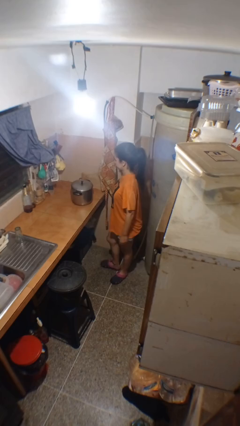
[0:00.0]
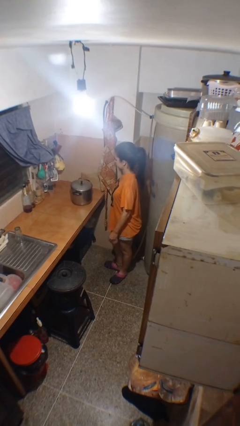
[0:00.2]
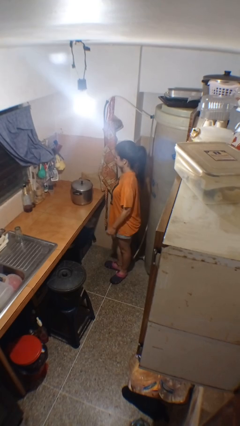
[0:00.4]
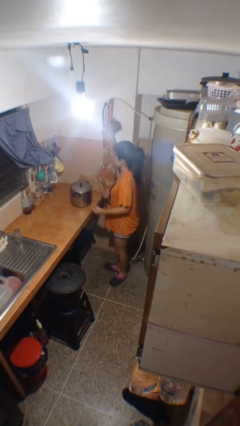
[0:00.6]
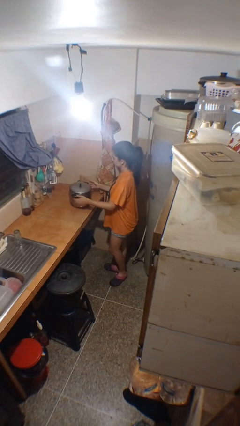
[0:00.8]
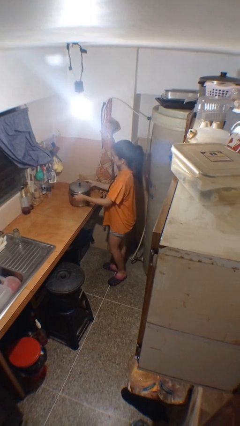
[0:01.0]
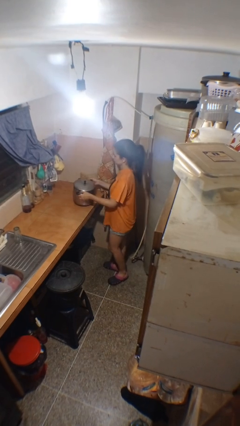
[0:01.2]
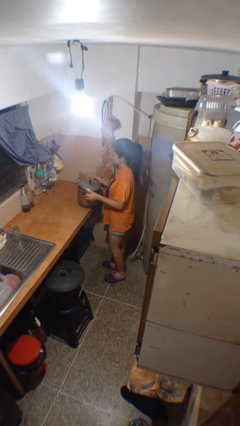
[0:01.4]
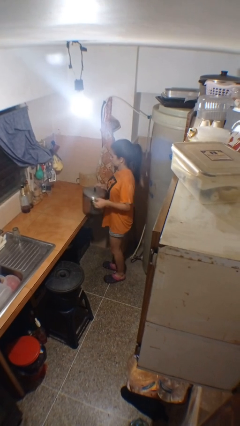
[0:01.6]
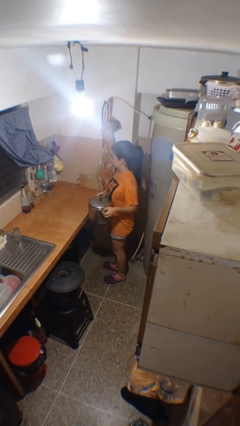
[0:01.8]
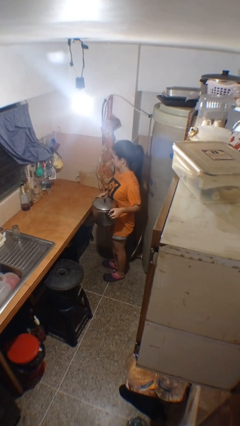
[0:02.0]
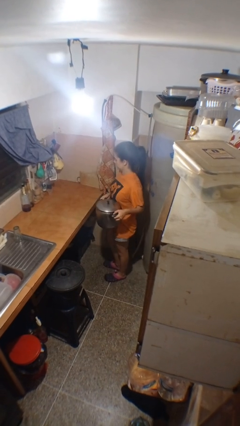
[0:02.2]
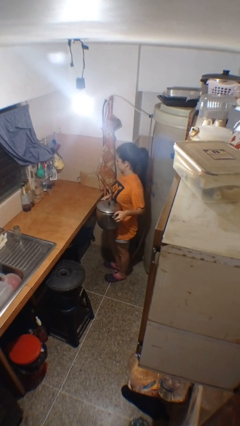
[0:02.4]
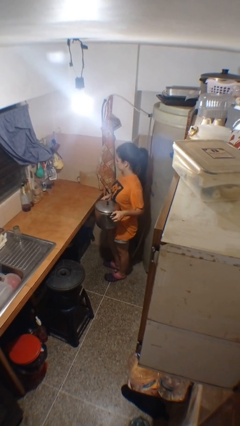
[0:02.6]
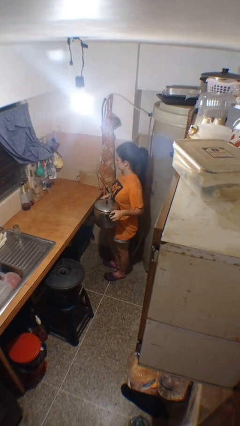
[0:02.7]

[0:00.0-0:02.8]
person picks up object from countertop

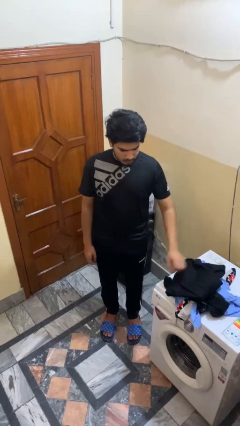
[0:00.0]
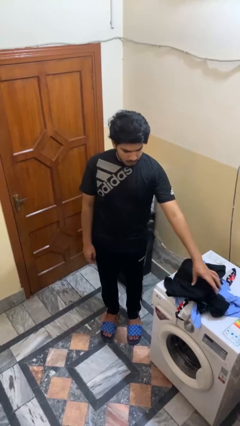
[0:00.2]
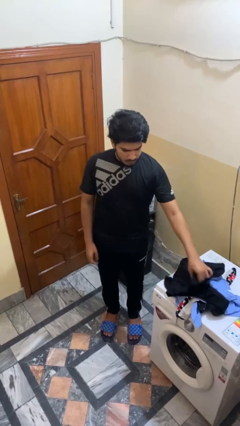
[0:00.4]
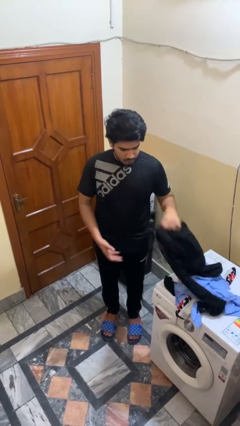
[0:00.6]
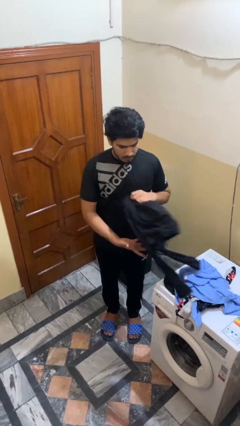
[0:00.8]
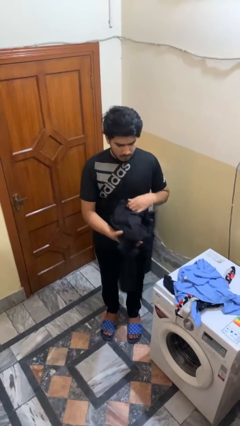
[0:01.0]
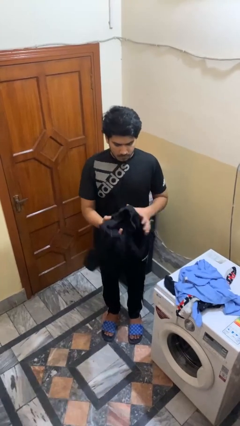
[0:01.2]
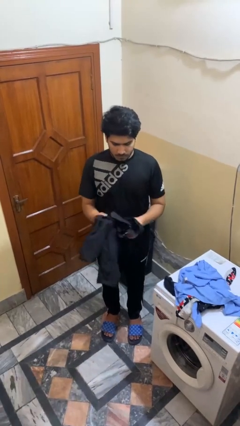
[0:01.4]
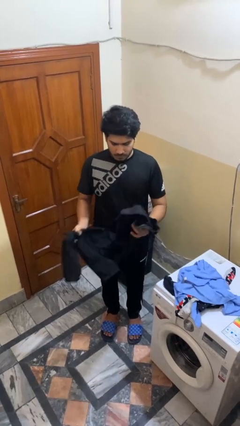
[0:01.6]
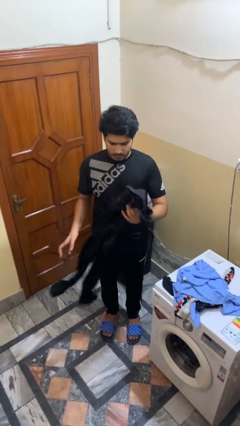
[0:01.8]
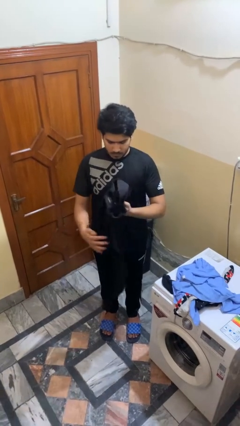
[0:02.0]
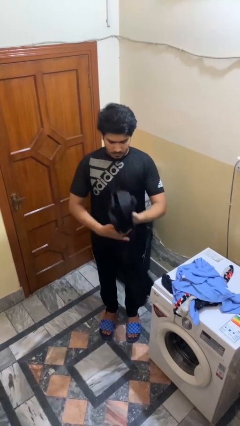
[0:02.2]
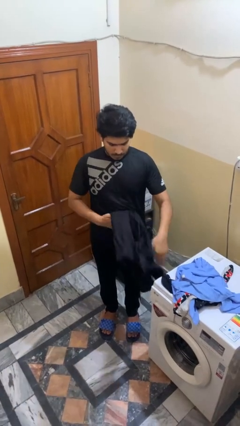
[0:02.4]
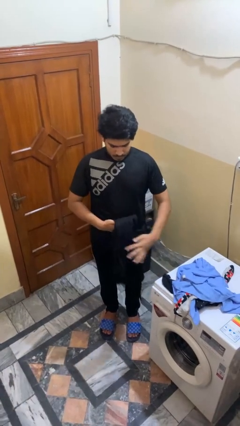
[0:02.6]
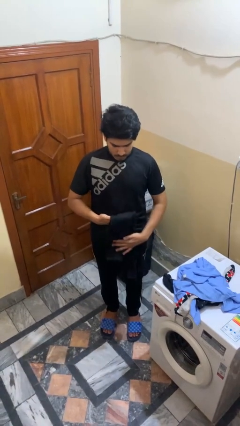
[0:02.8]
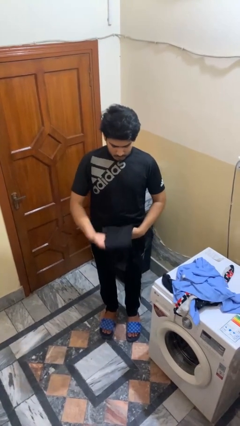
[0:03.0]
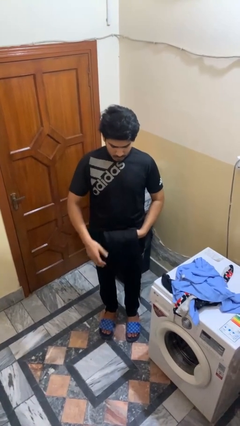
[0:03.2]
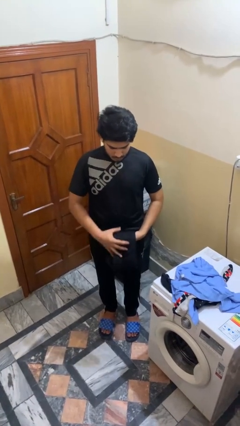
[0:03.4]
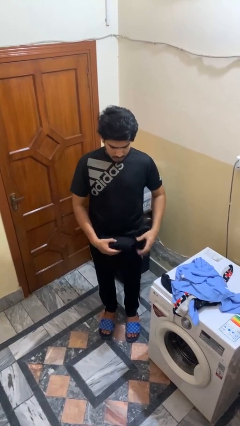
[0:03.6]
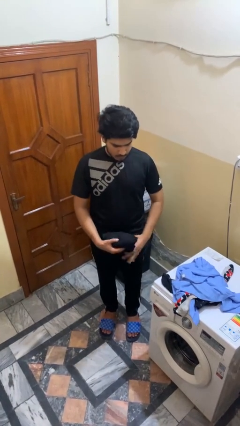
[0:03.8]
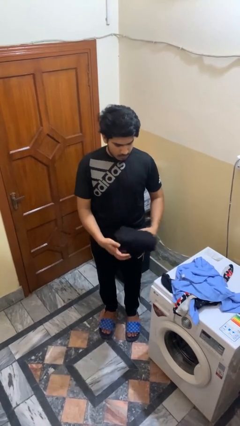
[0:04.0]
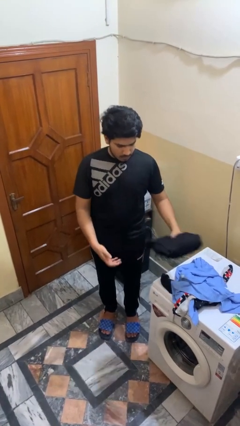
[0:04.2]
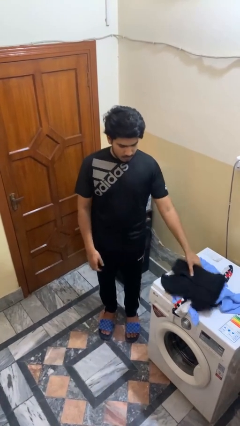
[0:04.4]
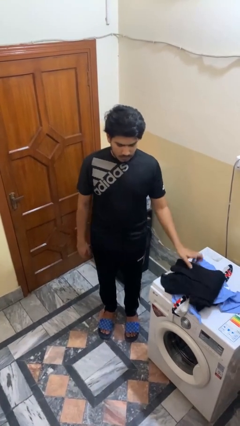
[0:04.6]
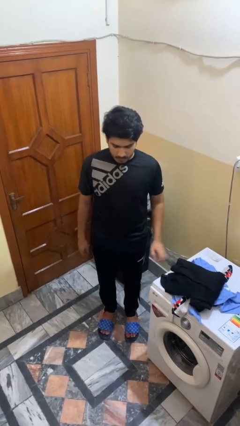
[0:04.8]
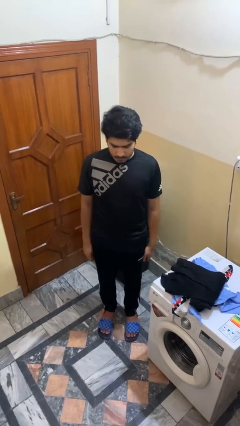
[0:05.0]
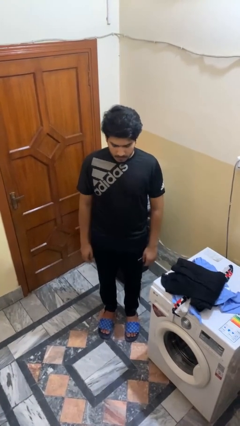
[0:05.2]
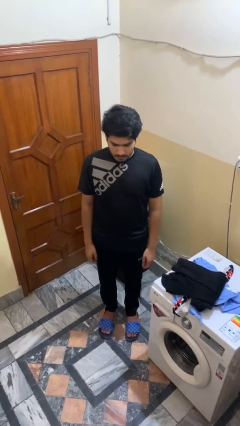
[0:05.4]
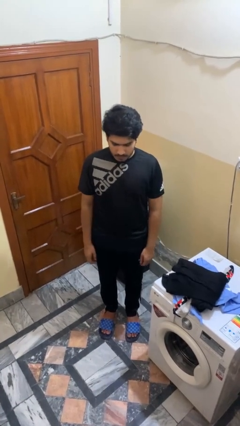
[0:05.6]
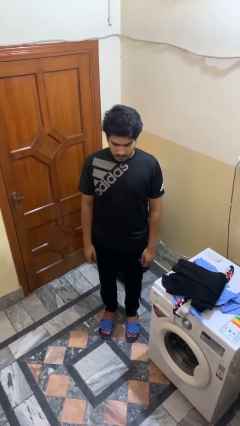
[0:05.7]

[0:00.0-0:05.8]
person folds pants

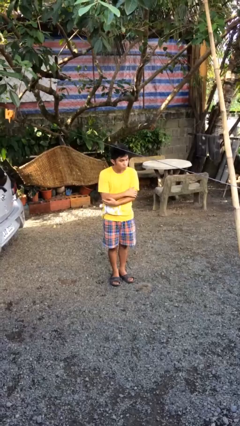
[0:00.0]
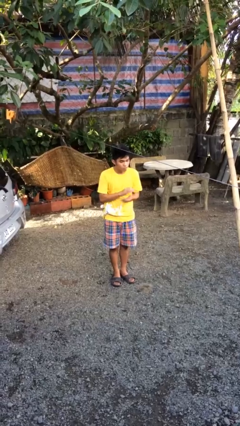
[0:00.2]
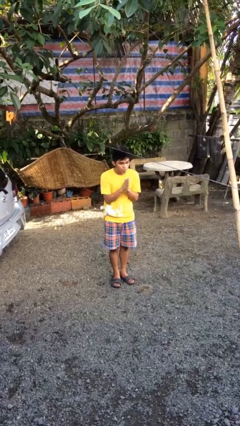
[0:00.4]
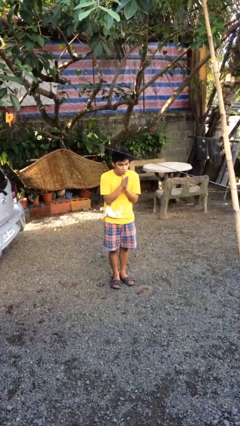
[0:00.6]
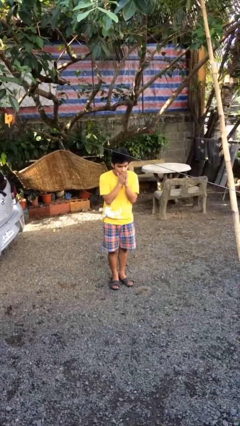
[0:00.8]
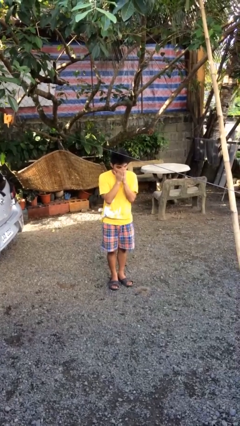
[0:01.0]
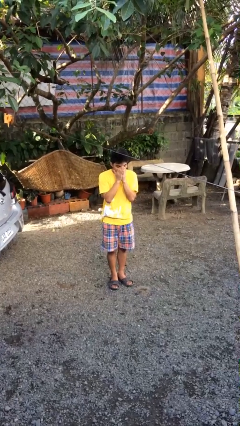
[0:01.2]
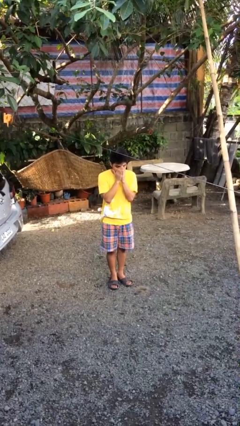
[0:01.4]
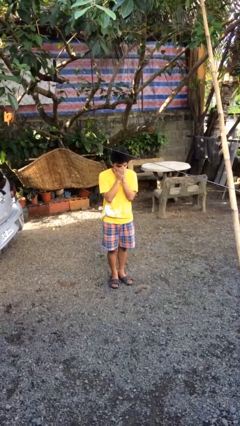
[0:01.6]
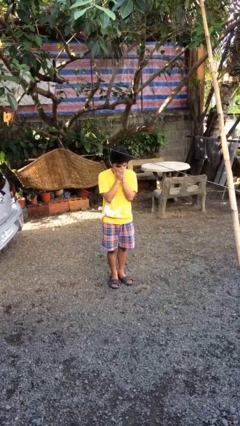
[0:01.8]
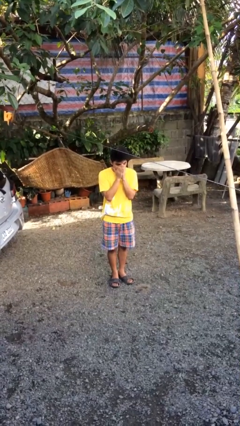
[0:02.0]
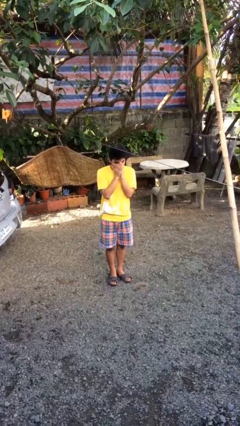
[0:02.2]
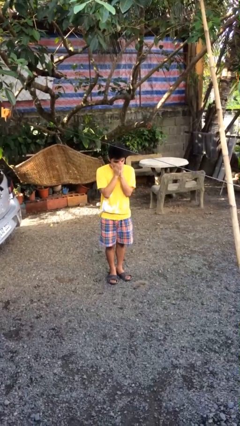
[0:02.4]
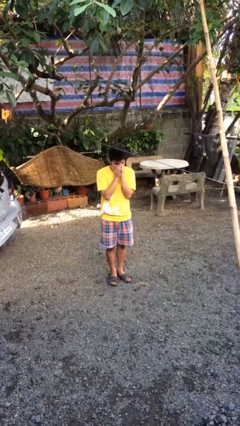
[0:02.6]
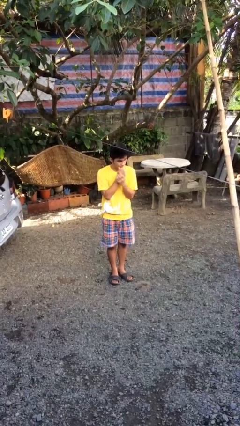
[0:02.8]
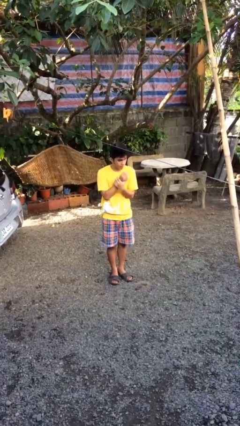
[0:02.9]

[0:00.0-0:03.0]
person blows into hands

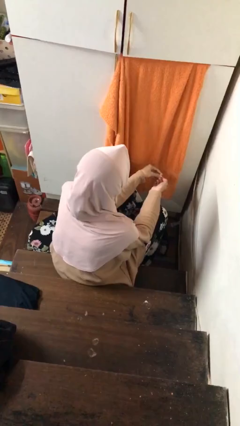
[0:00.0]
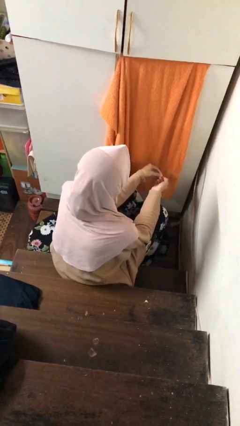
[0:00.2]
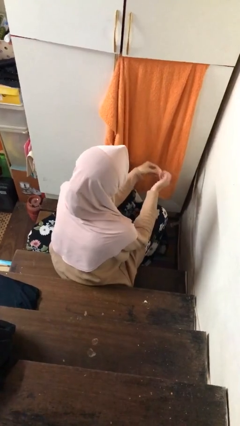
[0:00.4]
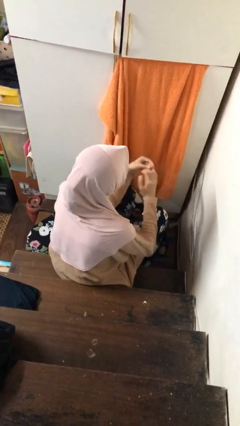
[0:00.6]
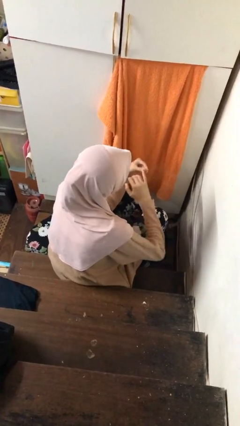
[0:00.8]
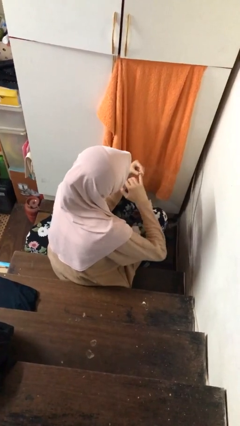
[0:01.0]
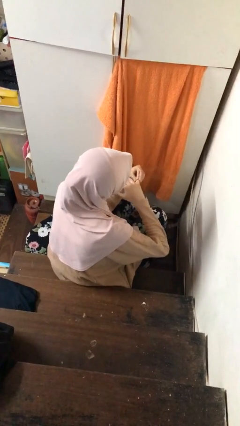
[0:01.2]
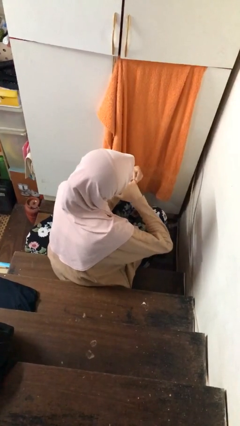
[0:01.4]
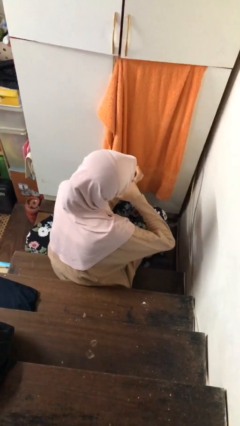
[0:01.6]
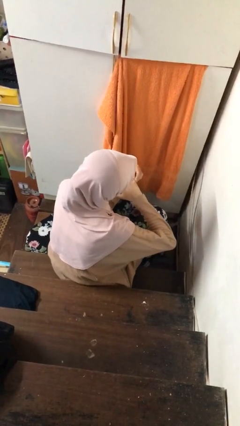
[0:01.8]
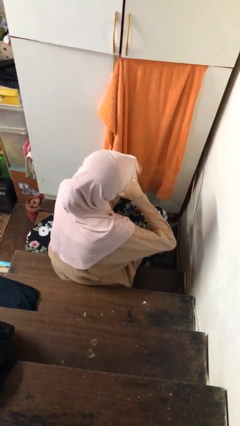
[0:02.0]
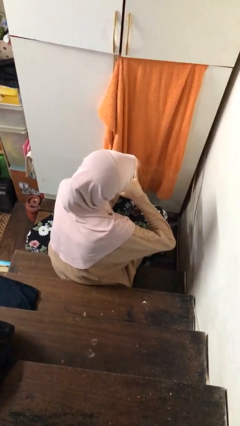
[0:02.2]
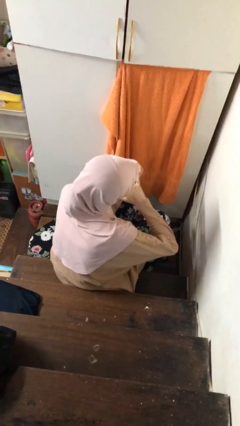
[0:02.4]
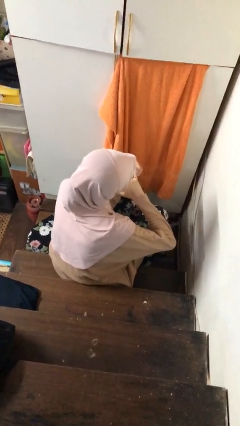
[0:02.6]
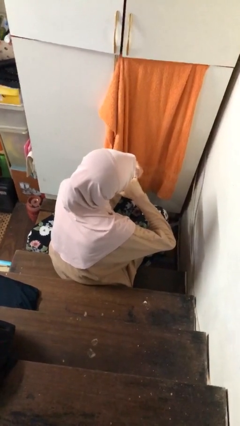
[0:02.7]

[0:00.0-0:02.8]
person puts on ring

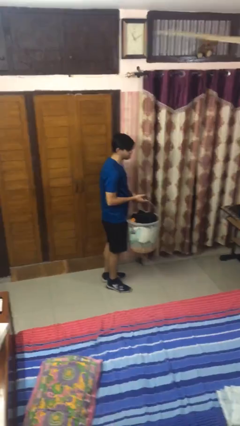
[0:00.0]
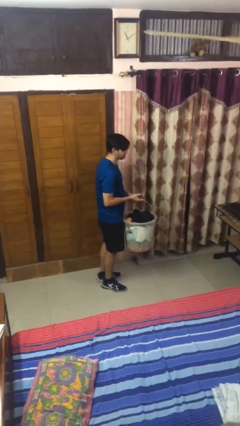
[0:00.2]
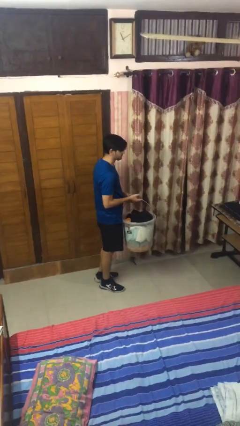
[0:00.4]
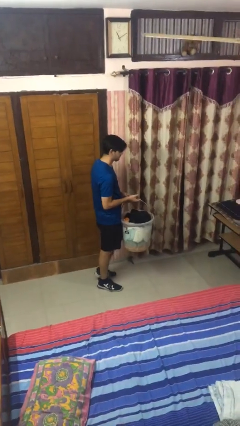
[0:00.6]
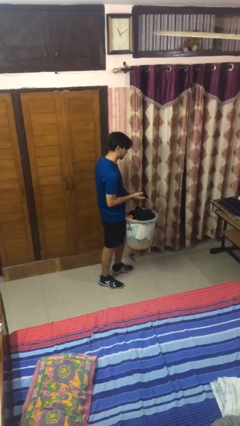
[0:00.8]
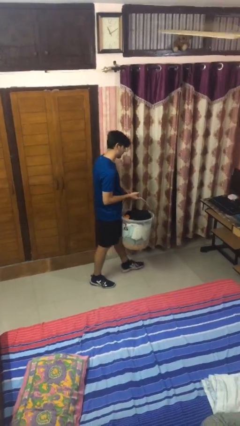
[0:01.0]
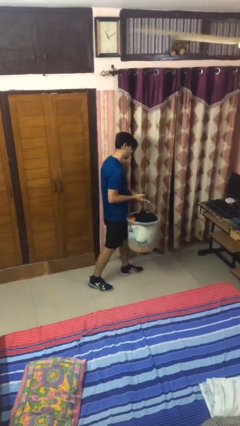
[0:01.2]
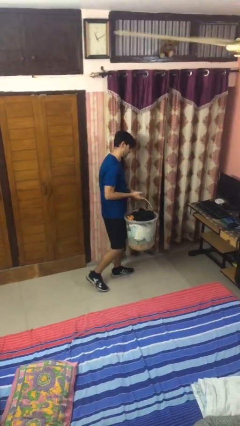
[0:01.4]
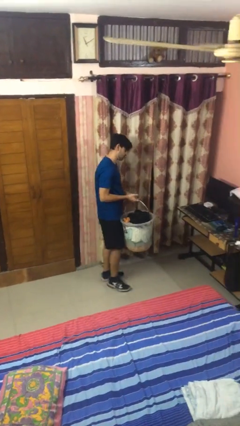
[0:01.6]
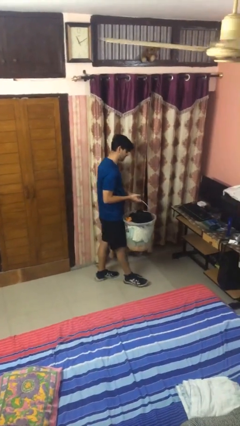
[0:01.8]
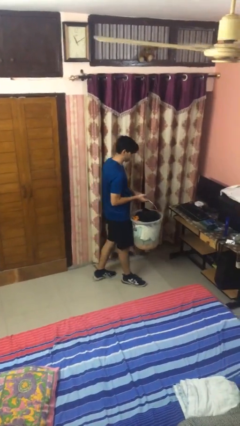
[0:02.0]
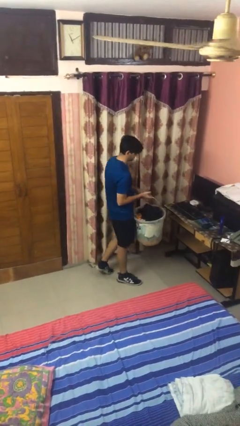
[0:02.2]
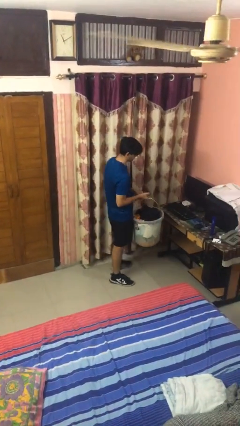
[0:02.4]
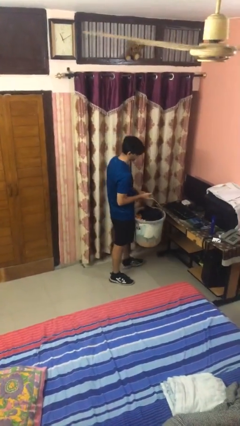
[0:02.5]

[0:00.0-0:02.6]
person carries laundry basket

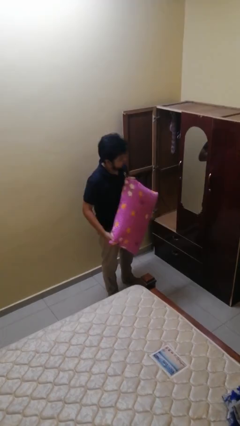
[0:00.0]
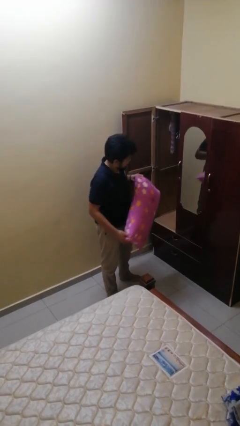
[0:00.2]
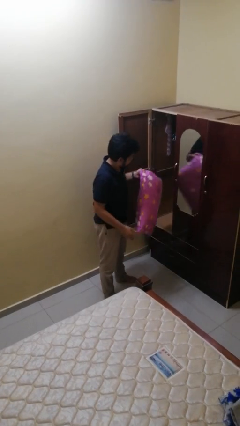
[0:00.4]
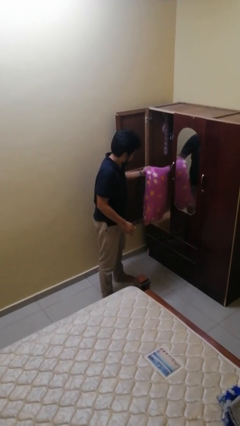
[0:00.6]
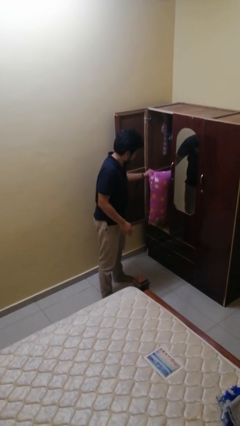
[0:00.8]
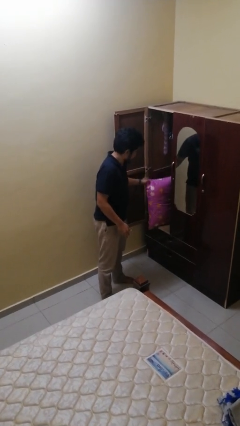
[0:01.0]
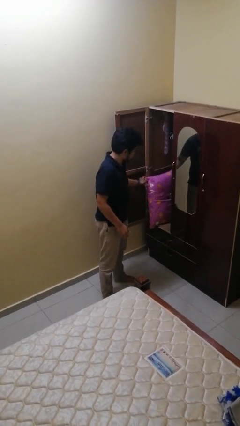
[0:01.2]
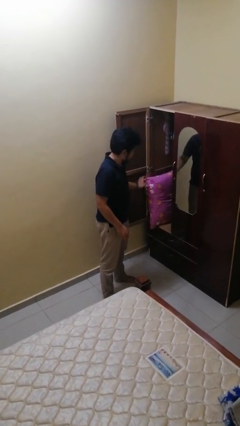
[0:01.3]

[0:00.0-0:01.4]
person puts down object into cabinet
